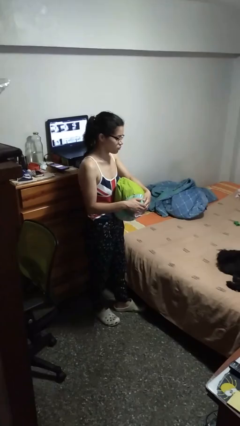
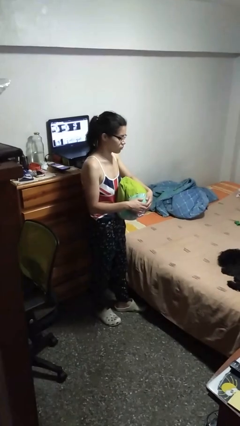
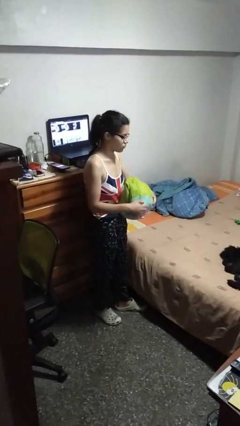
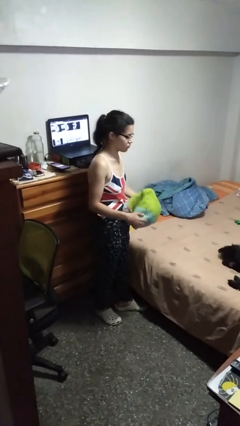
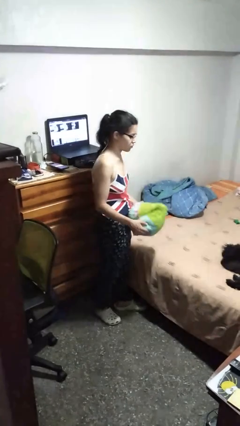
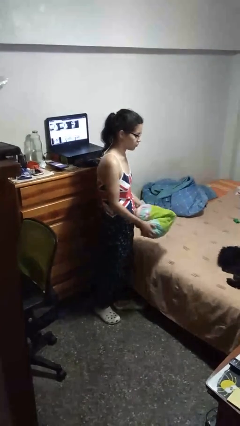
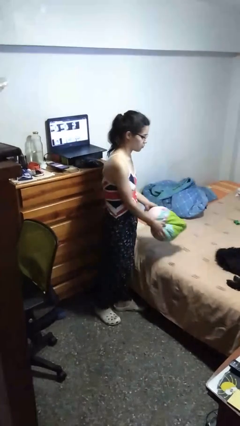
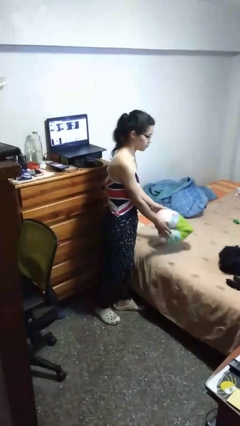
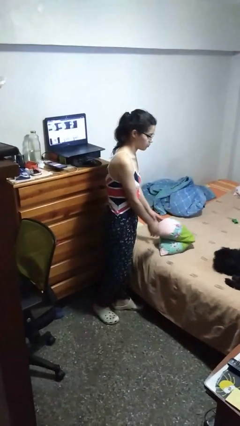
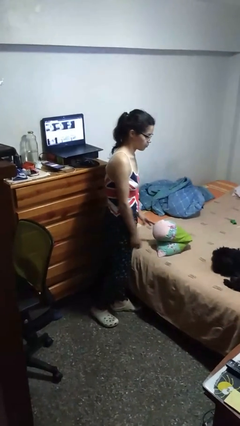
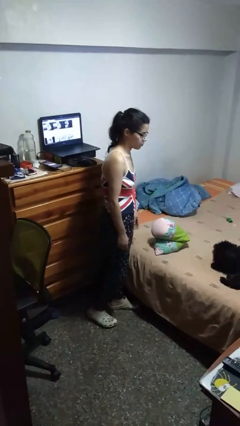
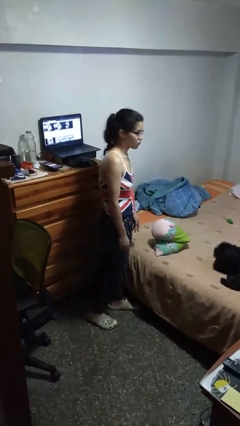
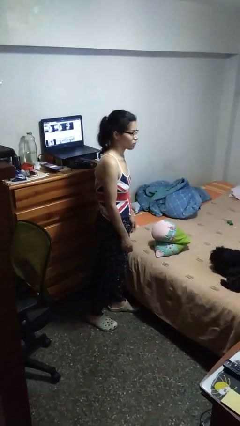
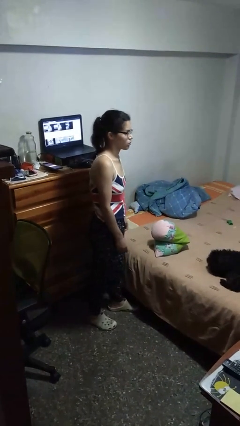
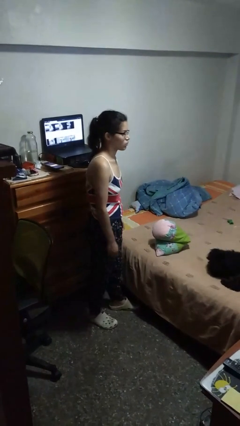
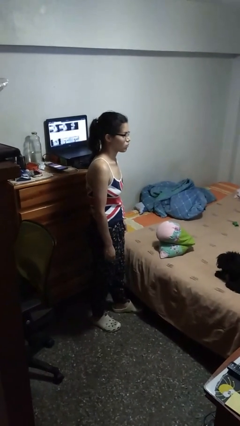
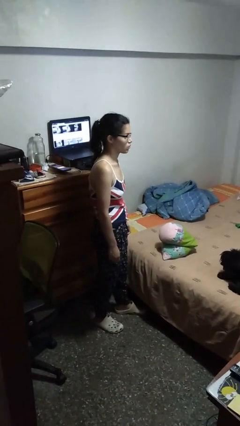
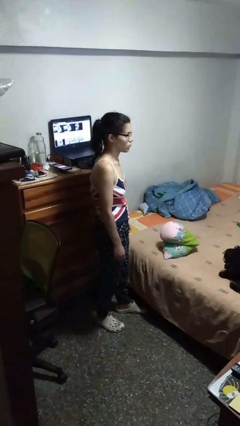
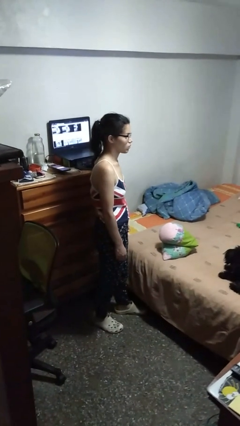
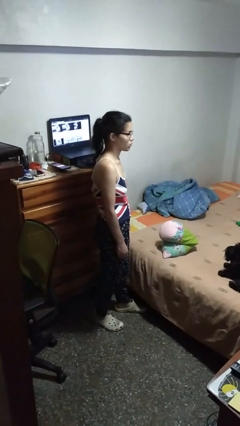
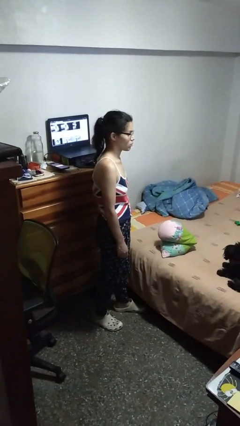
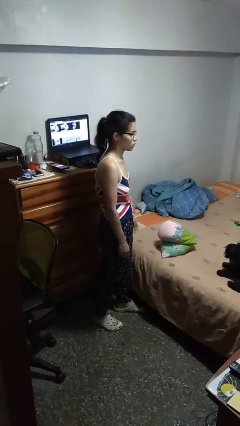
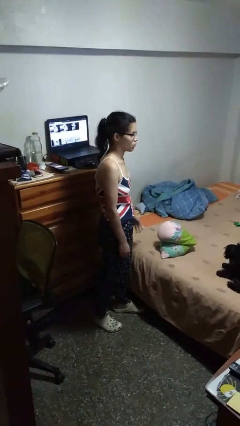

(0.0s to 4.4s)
person puts down object on bed

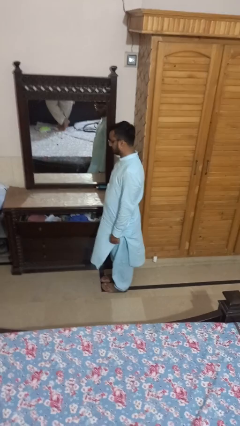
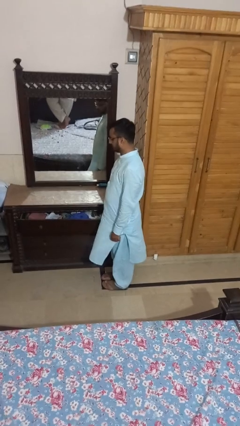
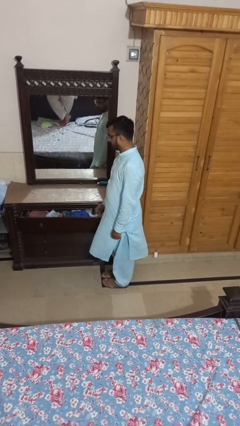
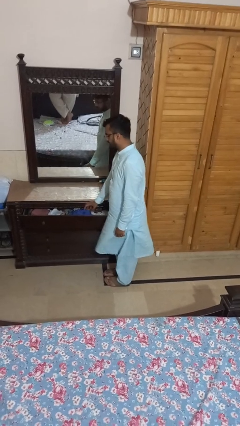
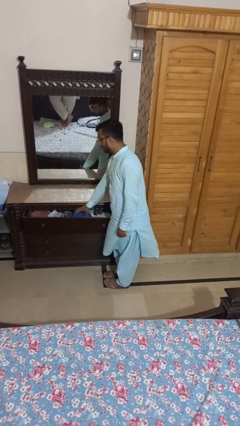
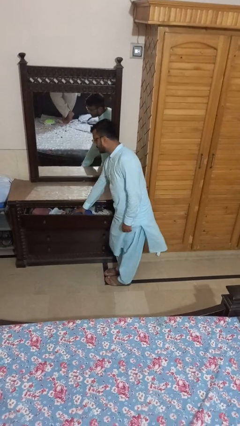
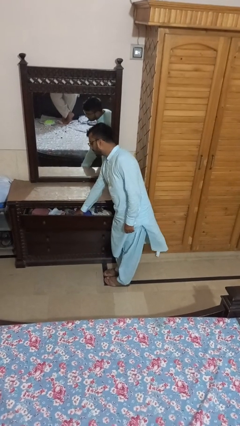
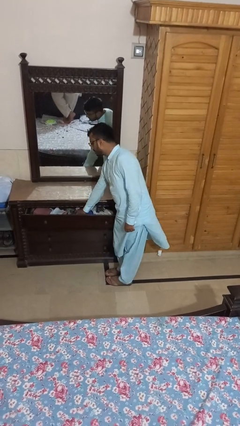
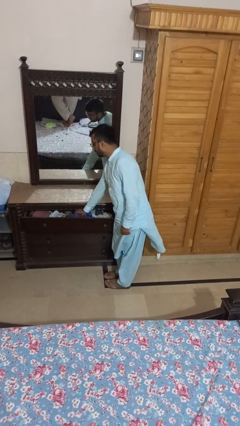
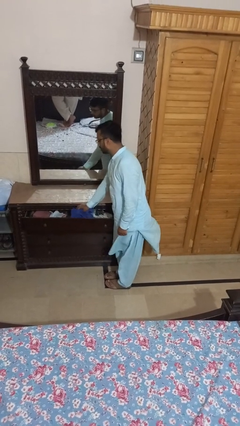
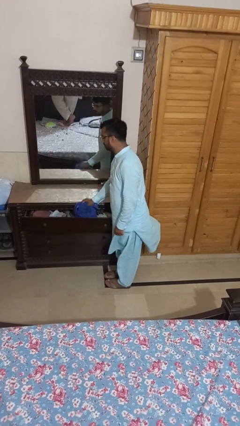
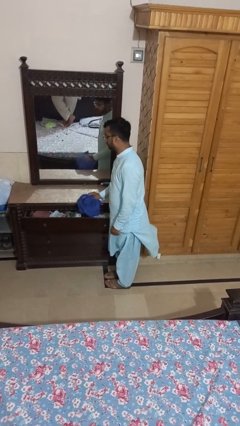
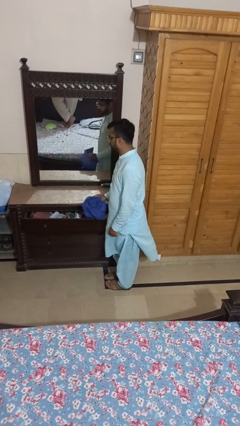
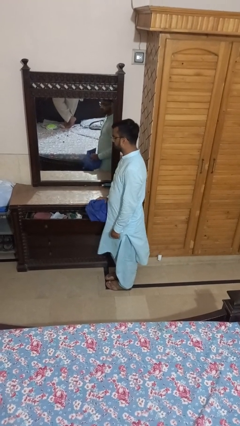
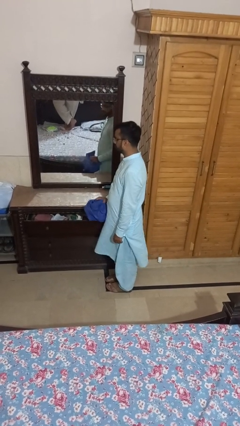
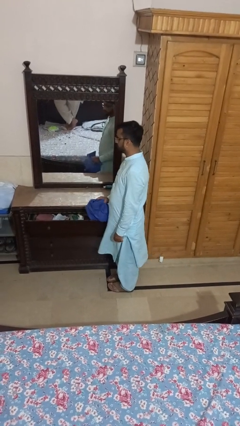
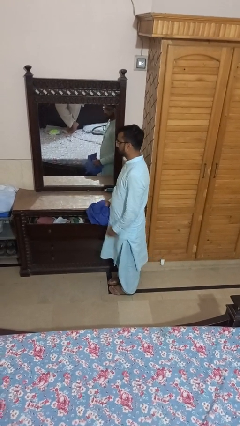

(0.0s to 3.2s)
person takes clothes from dresser

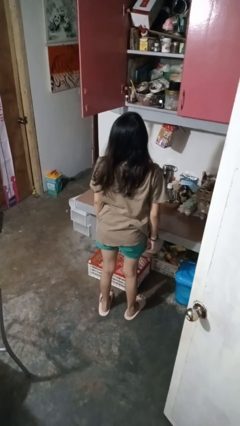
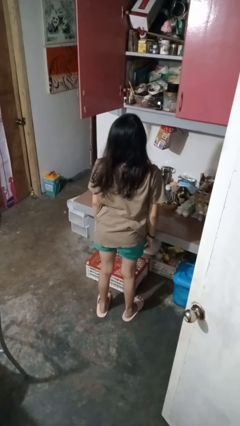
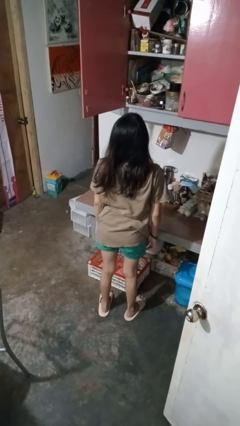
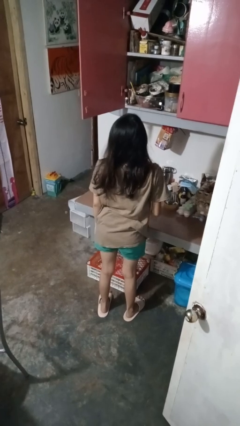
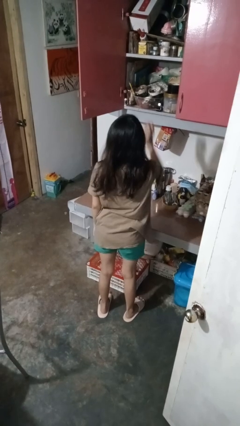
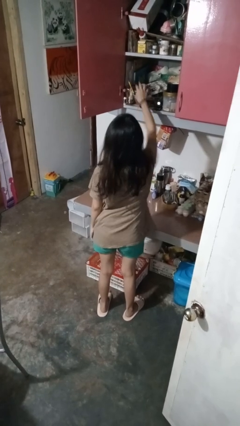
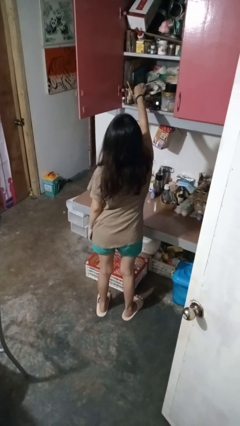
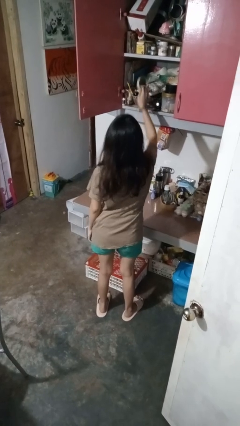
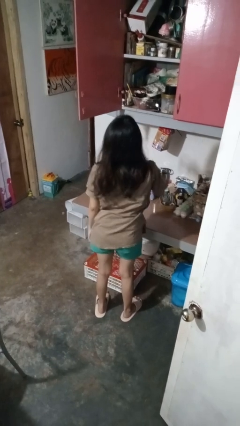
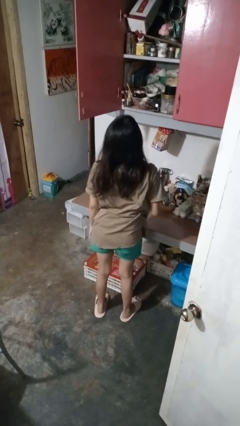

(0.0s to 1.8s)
person takes object from cabinet

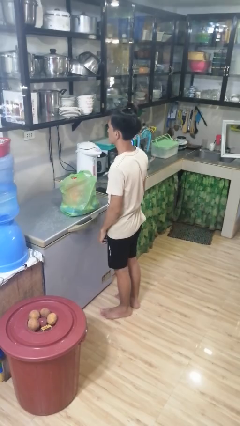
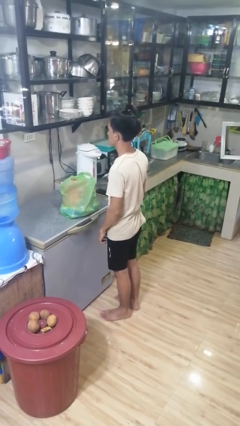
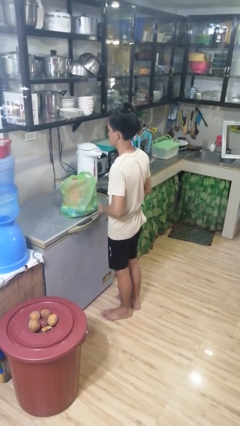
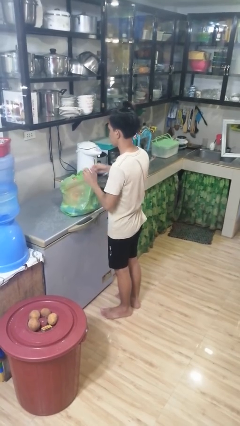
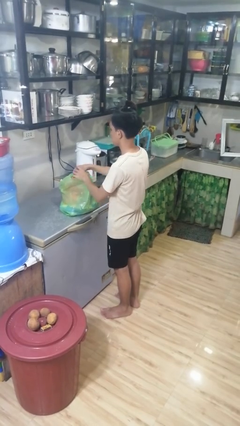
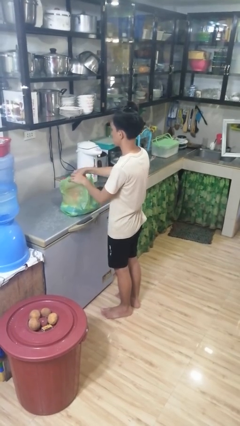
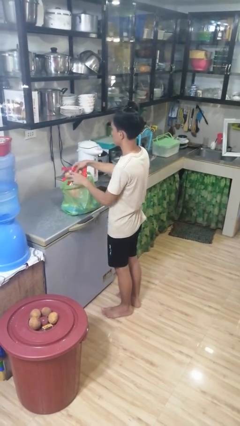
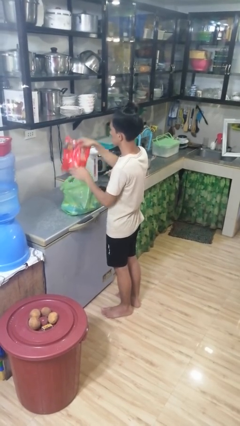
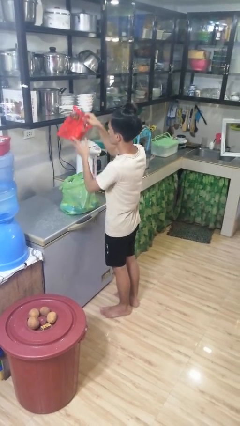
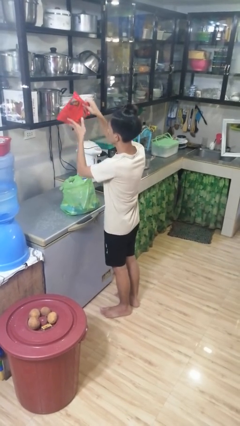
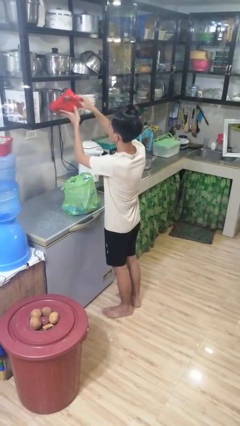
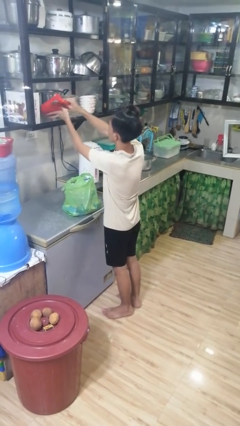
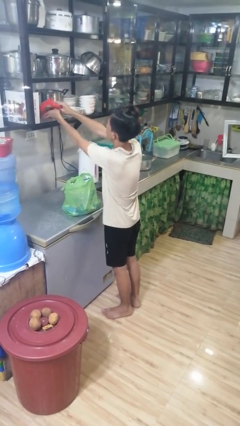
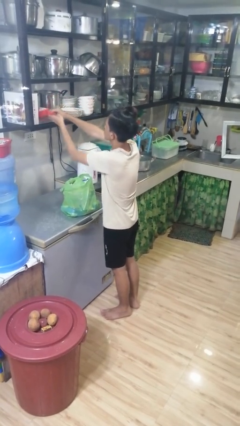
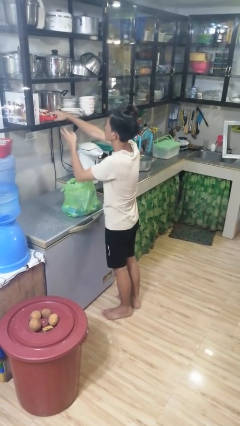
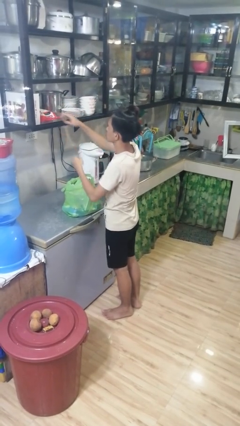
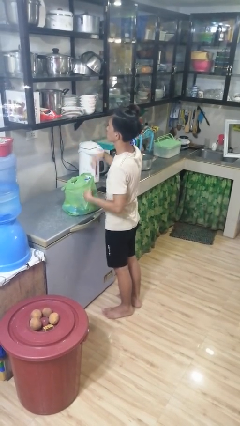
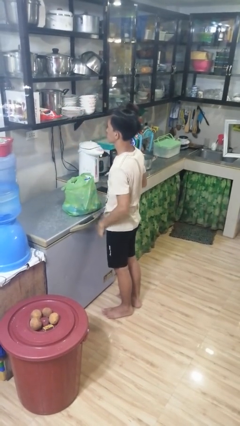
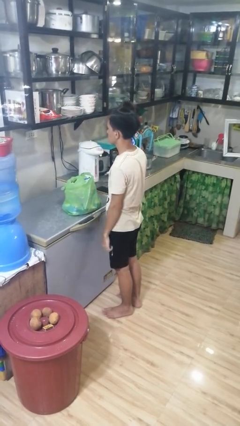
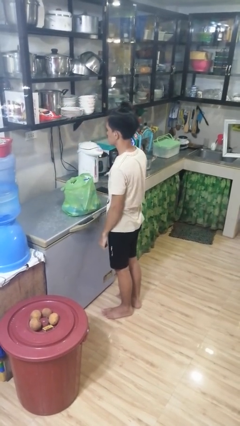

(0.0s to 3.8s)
person loads groceries into cabinet

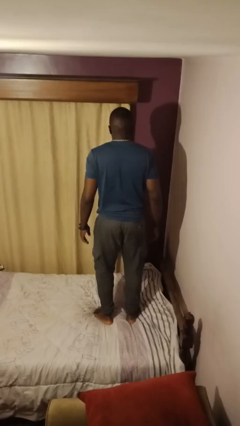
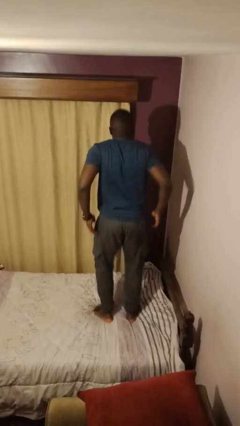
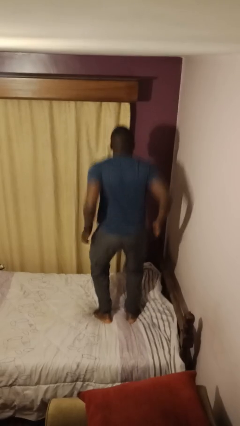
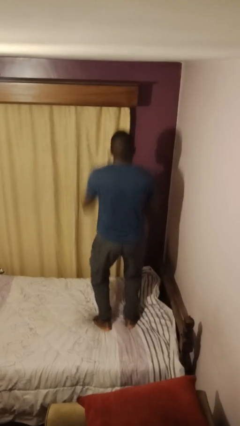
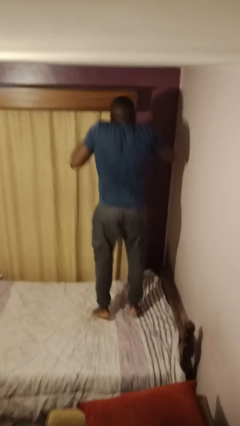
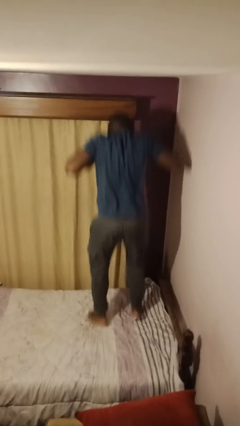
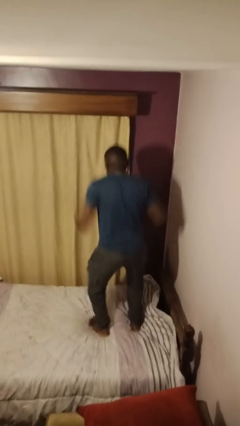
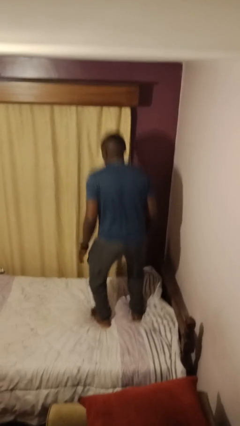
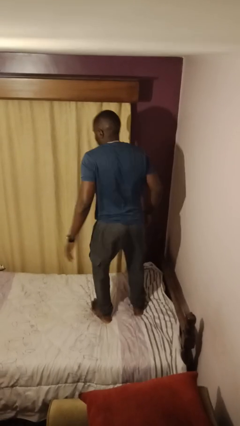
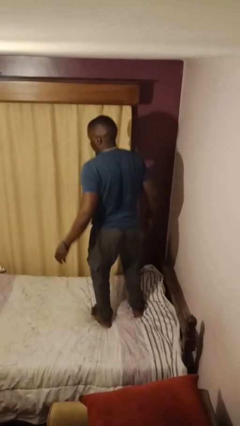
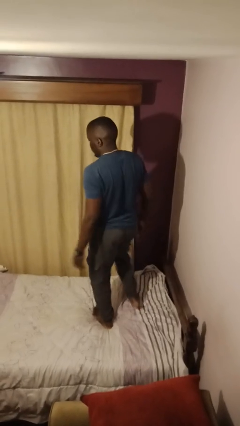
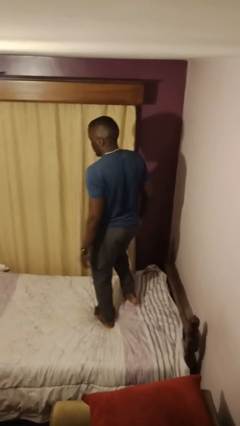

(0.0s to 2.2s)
person jumps on bed

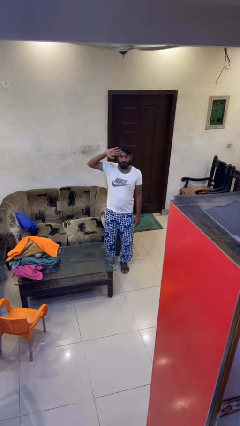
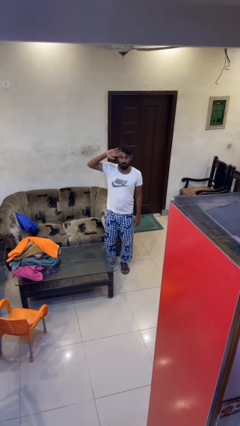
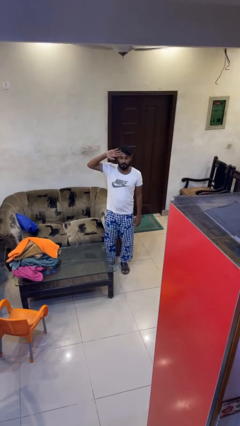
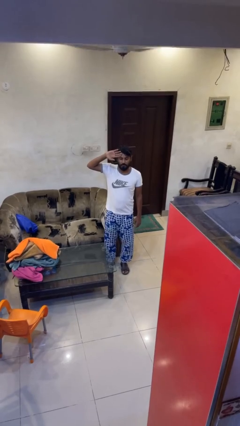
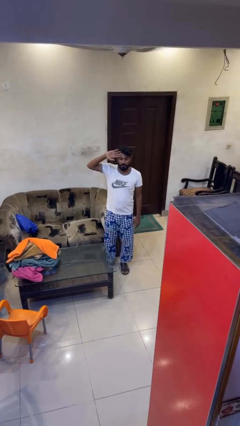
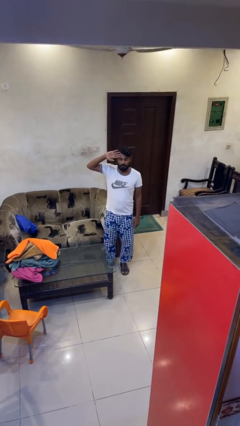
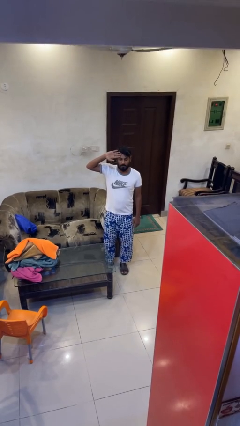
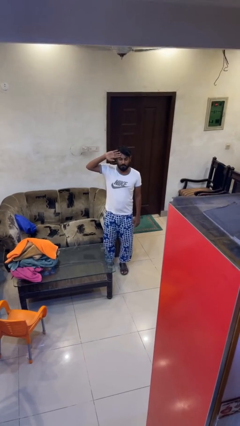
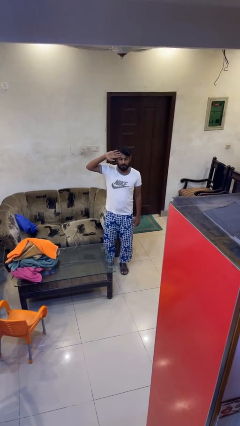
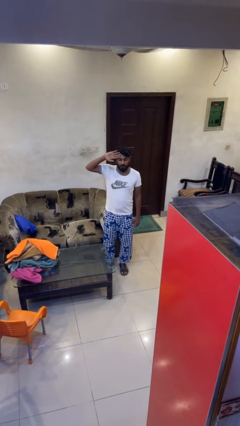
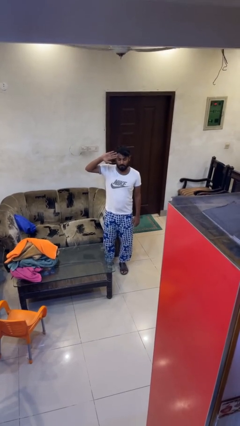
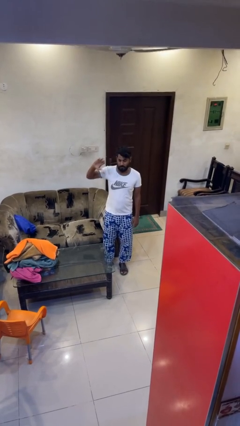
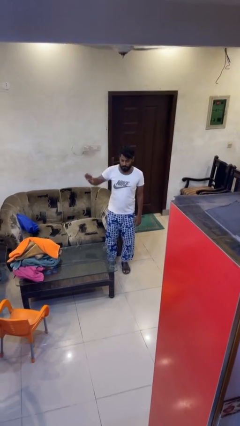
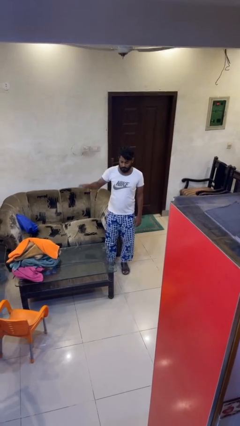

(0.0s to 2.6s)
person salutes
